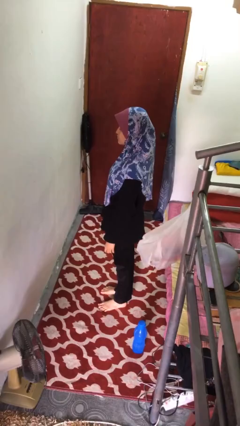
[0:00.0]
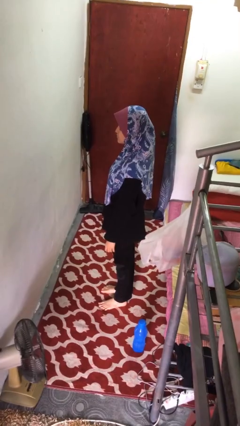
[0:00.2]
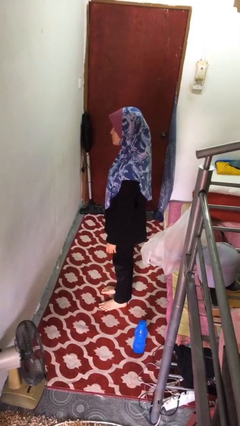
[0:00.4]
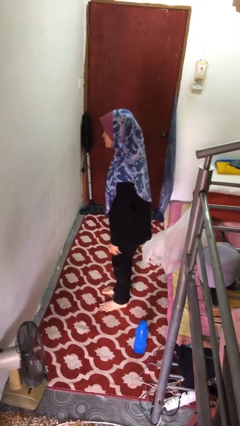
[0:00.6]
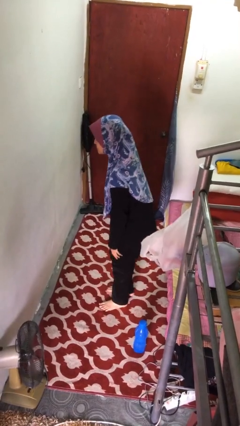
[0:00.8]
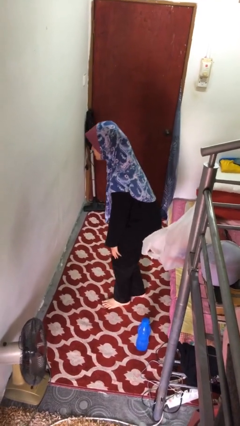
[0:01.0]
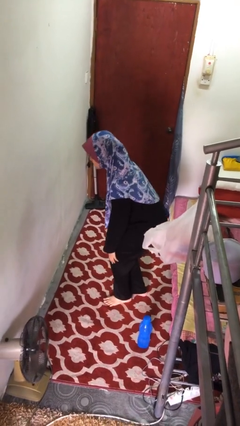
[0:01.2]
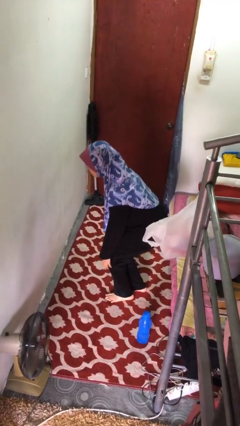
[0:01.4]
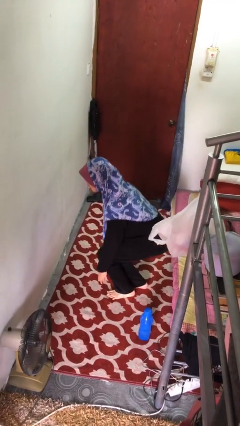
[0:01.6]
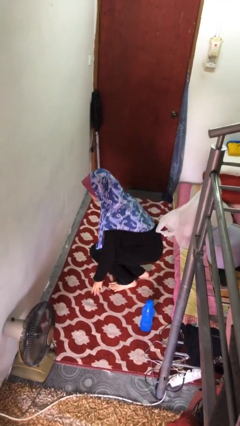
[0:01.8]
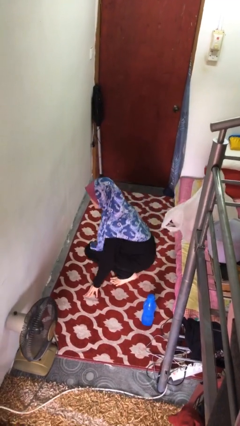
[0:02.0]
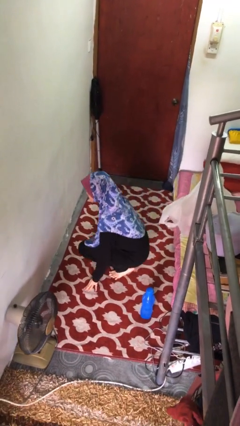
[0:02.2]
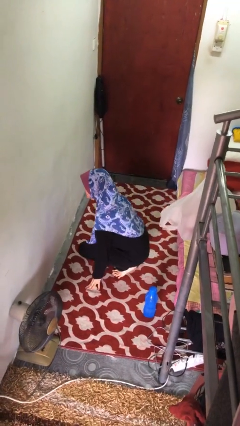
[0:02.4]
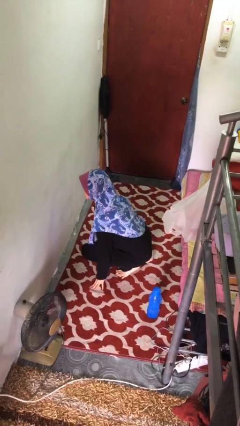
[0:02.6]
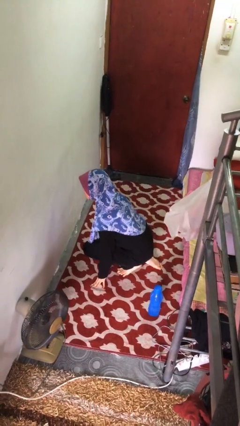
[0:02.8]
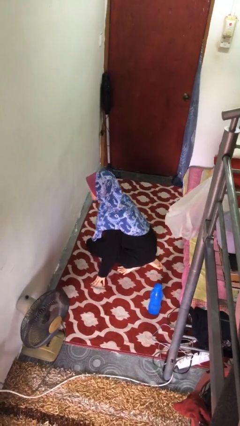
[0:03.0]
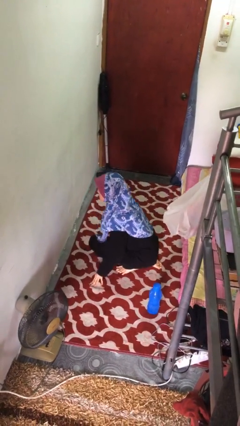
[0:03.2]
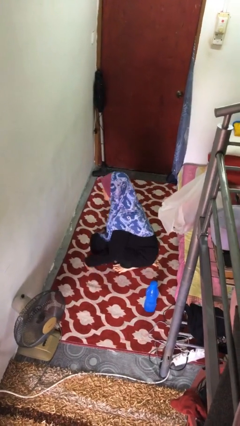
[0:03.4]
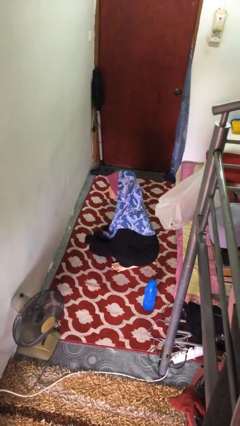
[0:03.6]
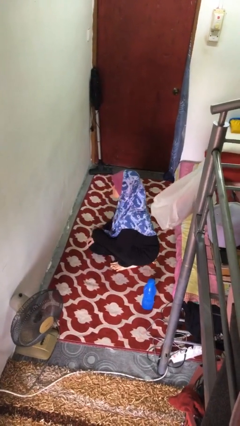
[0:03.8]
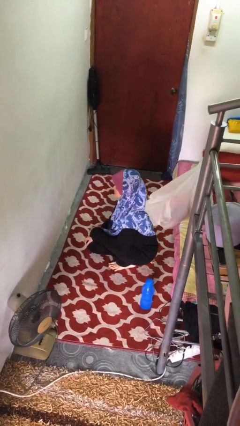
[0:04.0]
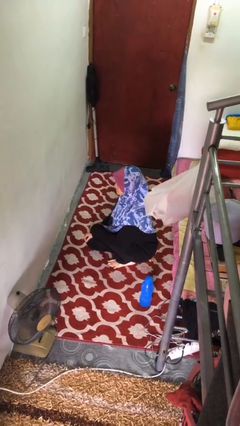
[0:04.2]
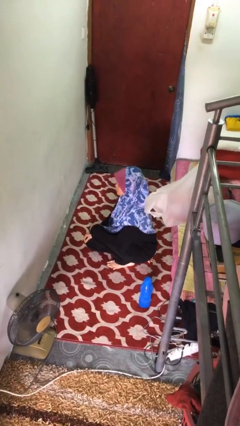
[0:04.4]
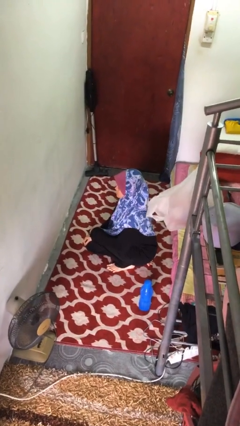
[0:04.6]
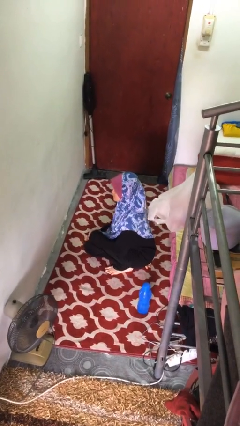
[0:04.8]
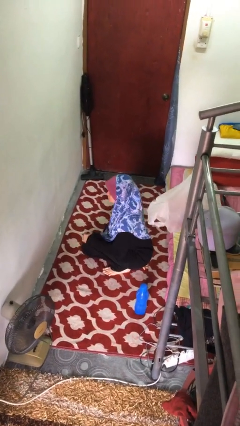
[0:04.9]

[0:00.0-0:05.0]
person kneels

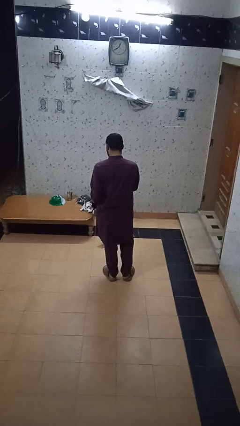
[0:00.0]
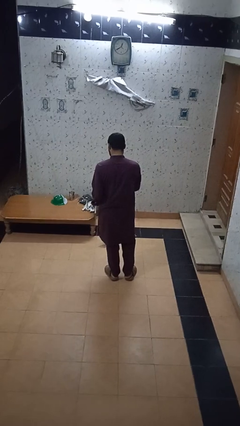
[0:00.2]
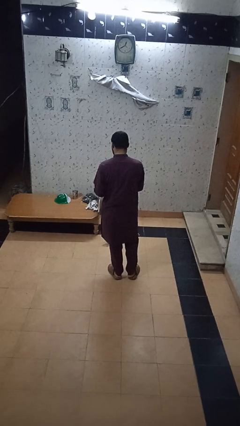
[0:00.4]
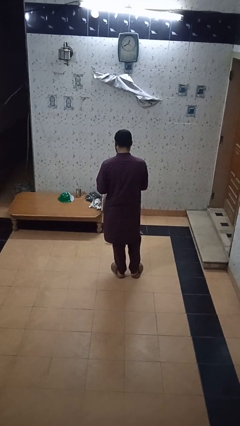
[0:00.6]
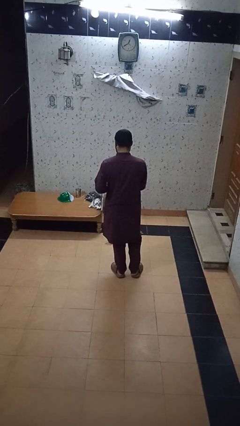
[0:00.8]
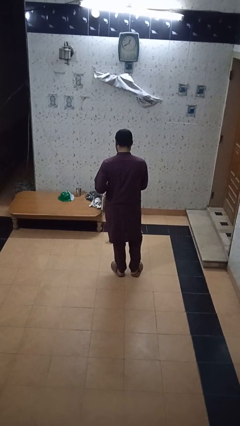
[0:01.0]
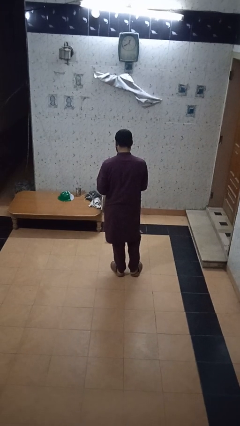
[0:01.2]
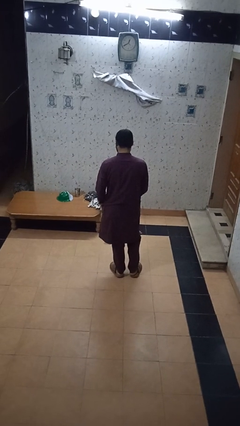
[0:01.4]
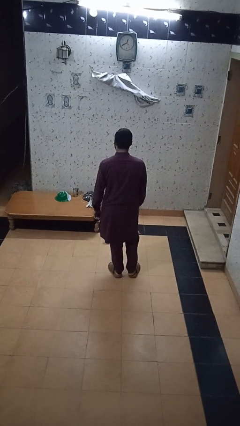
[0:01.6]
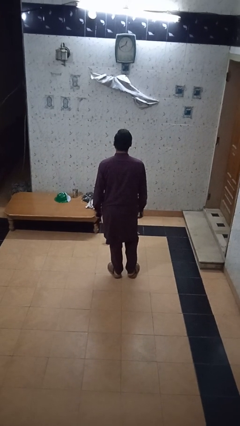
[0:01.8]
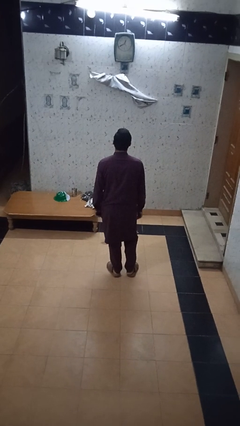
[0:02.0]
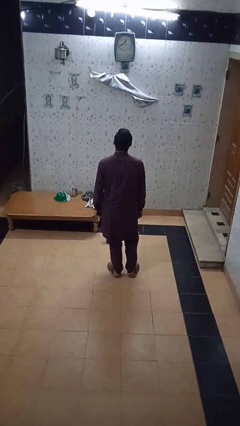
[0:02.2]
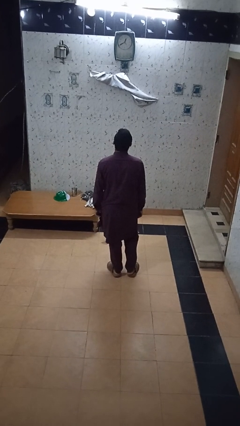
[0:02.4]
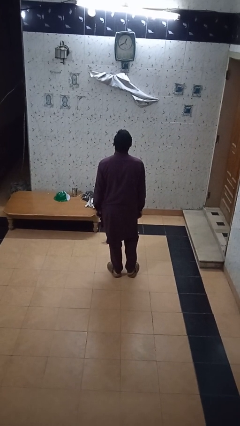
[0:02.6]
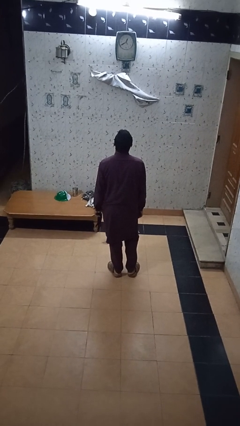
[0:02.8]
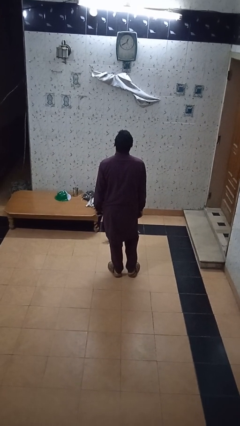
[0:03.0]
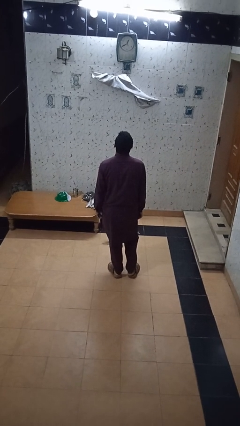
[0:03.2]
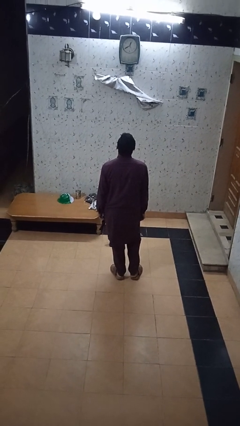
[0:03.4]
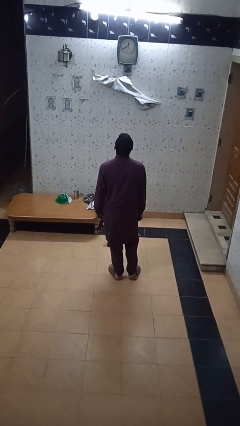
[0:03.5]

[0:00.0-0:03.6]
person takes off gloves

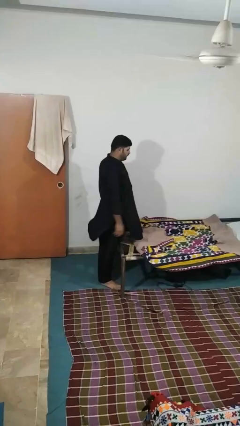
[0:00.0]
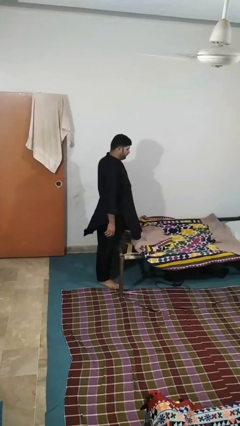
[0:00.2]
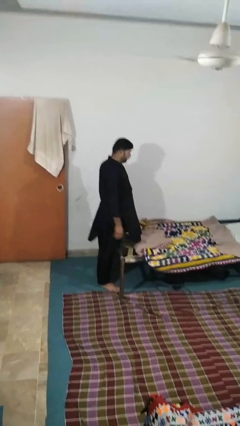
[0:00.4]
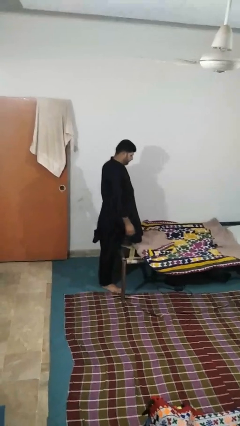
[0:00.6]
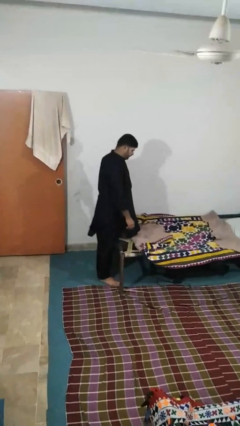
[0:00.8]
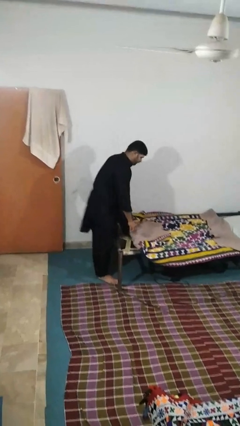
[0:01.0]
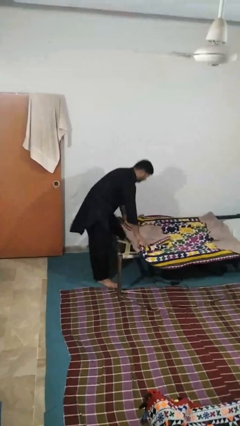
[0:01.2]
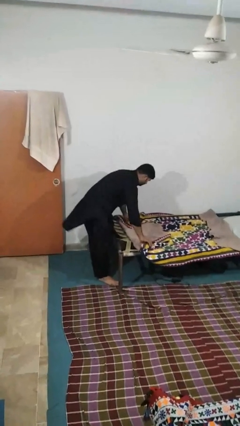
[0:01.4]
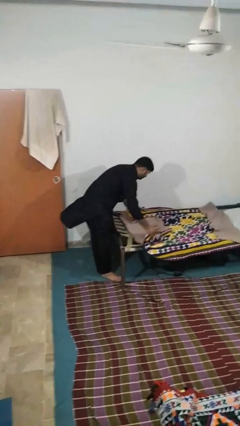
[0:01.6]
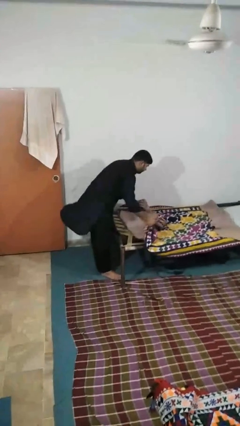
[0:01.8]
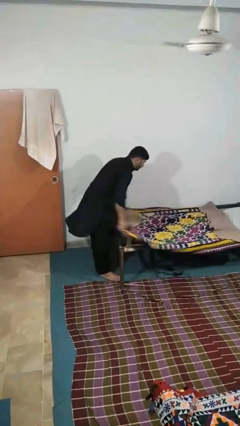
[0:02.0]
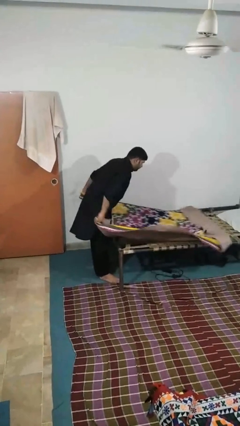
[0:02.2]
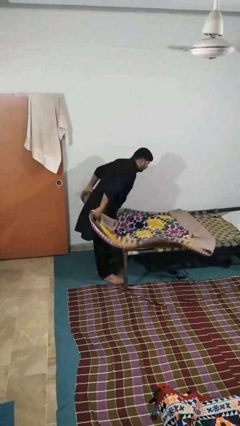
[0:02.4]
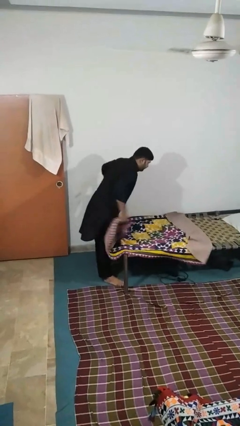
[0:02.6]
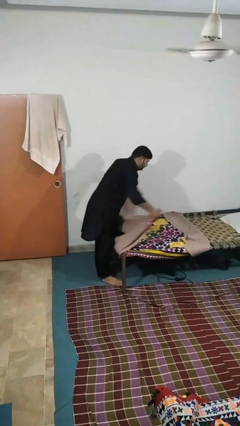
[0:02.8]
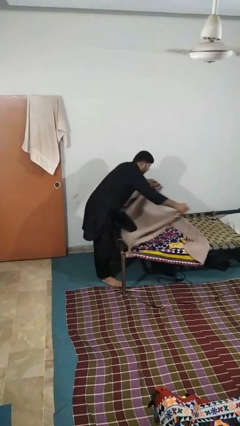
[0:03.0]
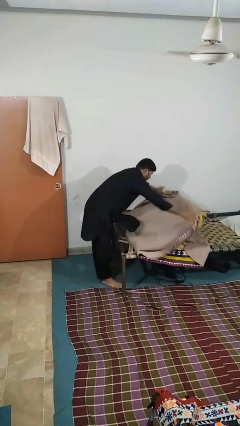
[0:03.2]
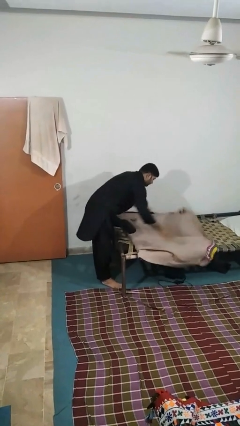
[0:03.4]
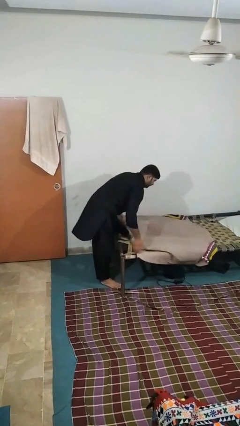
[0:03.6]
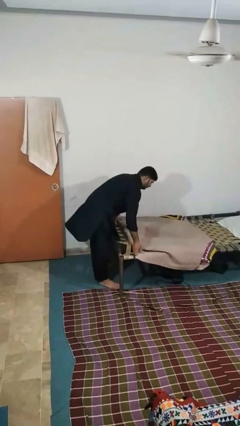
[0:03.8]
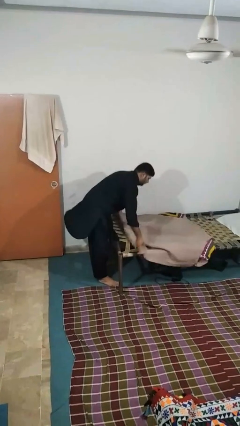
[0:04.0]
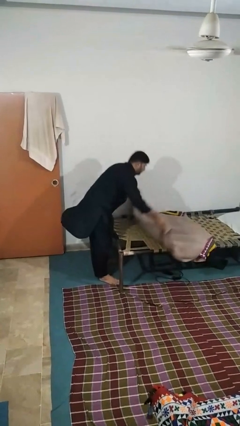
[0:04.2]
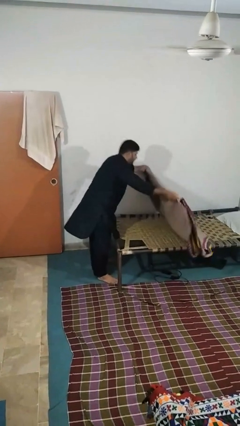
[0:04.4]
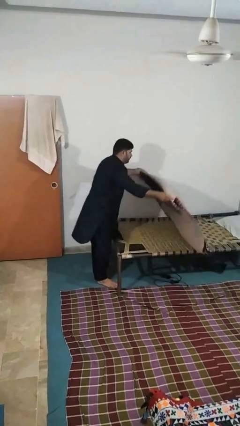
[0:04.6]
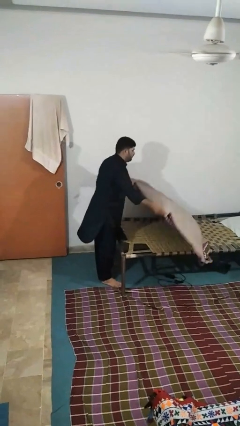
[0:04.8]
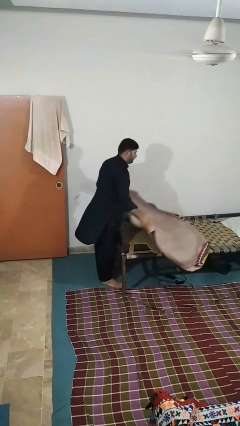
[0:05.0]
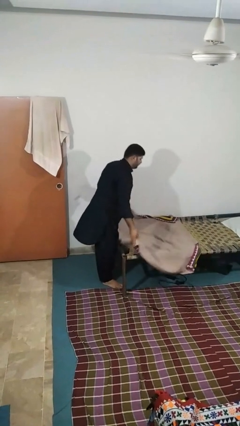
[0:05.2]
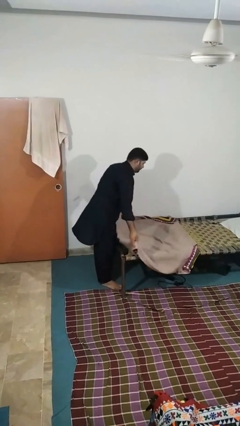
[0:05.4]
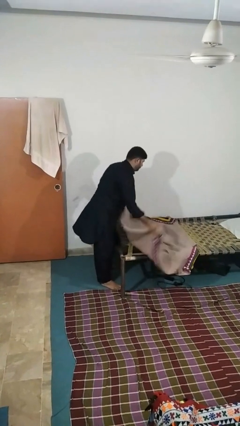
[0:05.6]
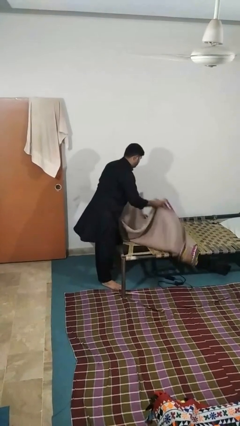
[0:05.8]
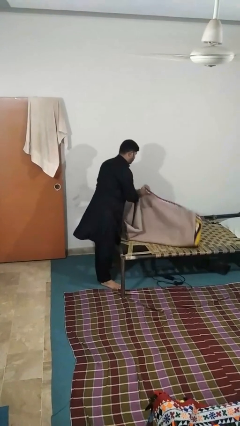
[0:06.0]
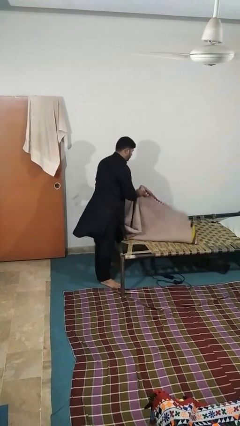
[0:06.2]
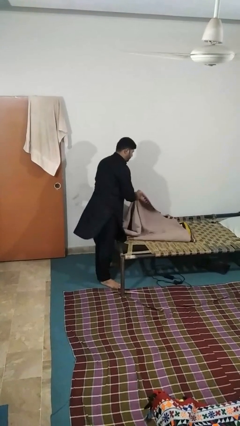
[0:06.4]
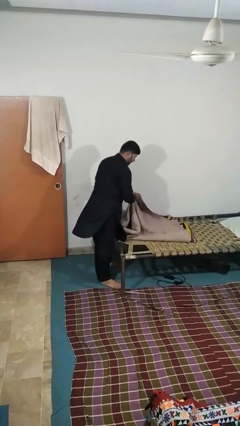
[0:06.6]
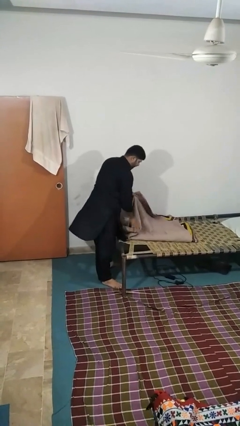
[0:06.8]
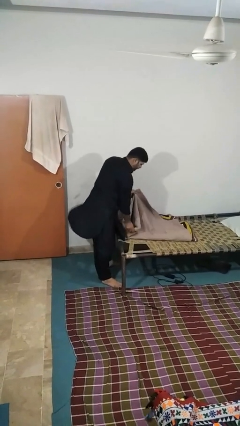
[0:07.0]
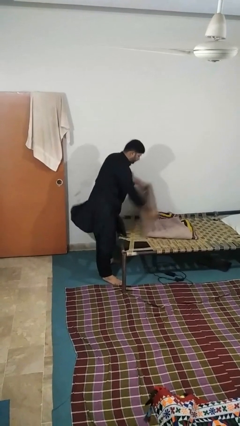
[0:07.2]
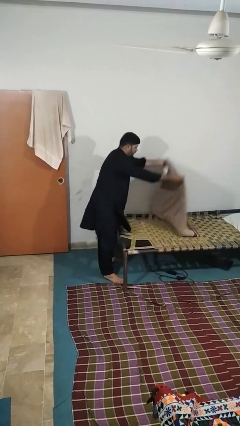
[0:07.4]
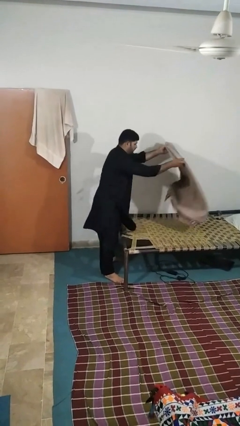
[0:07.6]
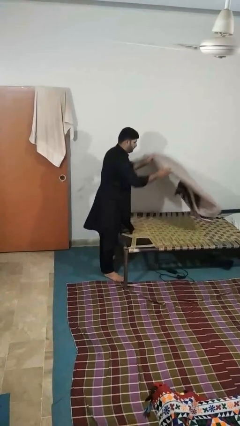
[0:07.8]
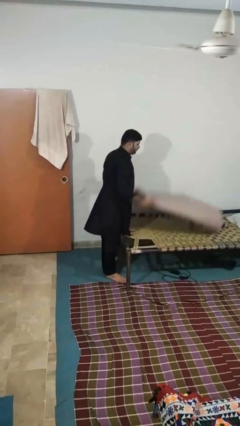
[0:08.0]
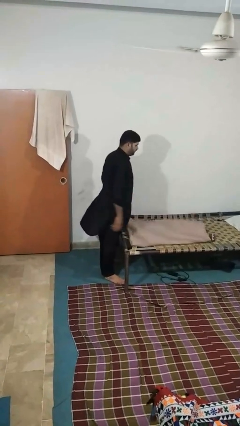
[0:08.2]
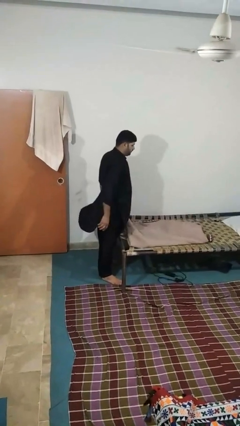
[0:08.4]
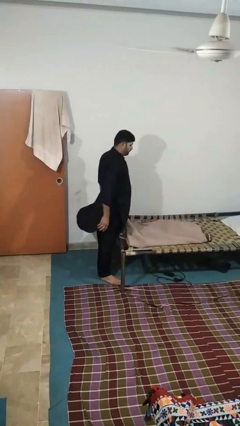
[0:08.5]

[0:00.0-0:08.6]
person folds blanket

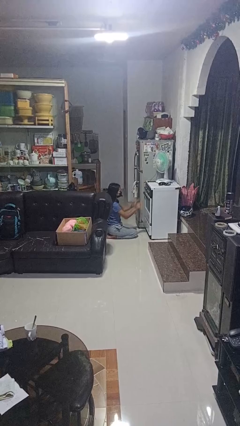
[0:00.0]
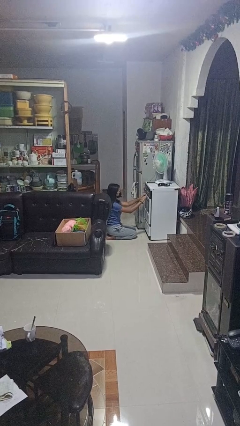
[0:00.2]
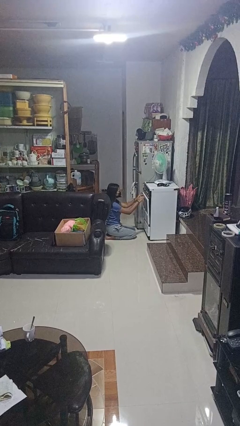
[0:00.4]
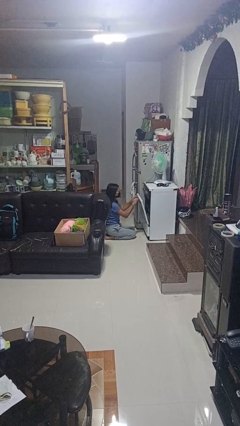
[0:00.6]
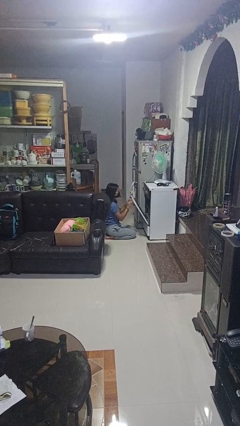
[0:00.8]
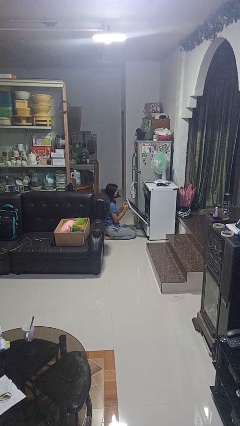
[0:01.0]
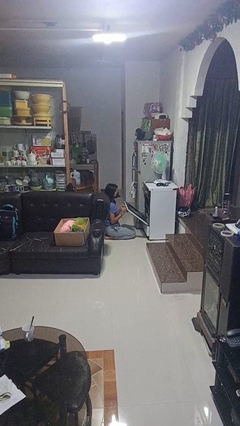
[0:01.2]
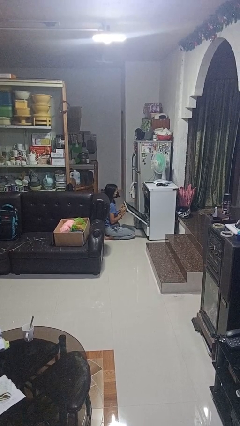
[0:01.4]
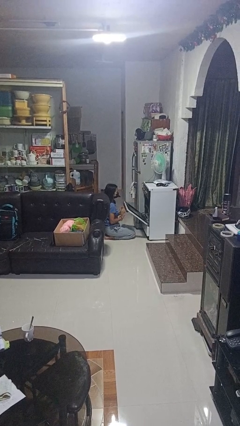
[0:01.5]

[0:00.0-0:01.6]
person opens oven door
